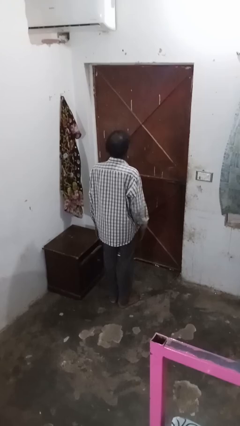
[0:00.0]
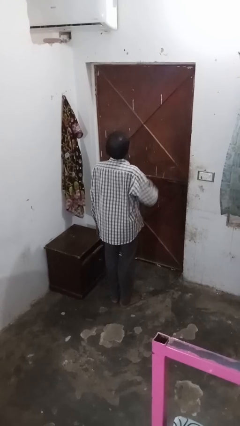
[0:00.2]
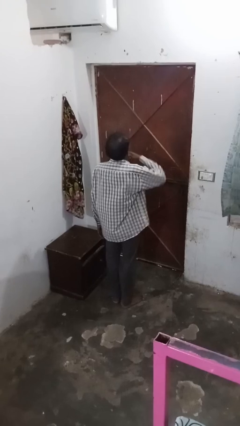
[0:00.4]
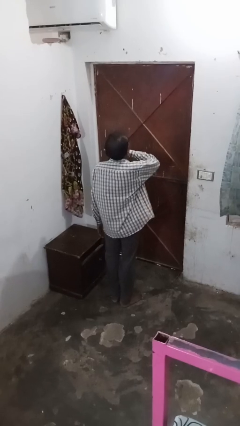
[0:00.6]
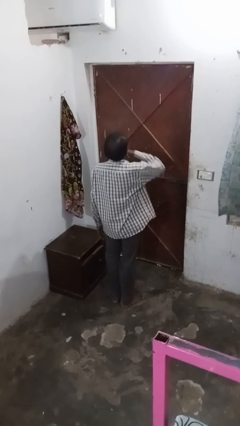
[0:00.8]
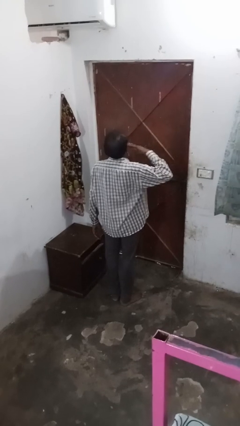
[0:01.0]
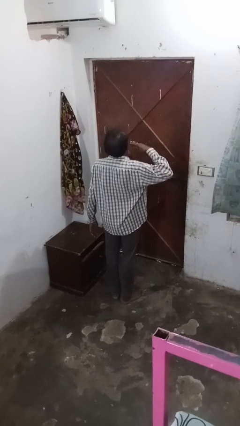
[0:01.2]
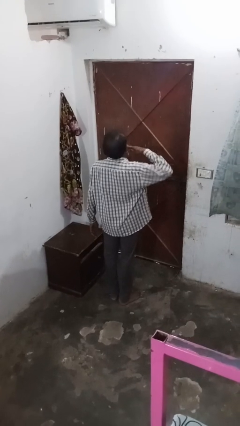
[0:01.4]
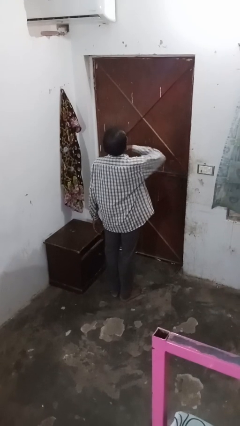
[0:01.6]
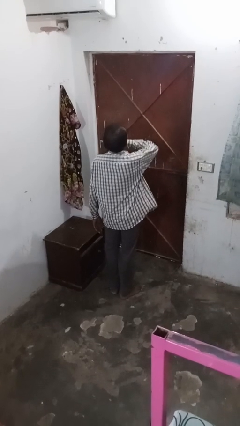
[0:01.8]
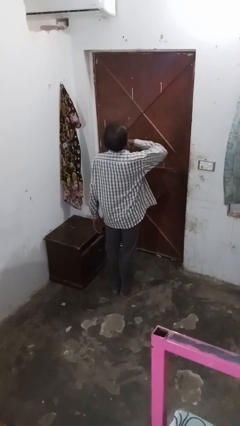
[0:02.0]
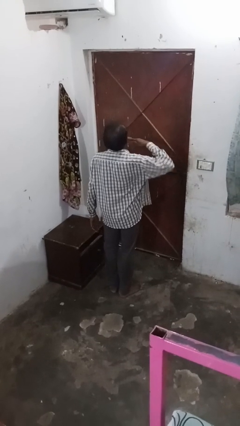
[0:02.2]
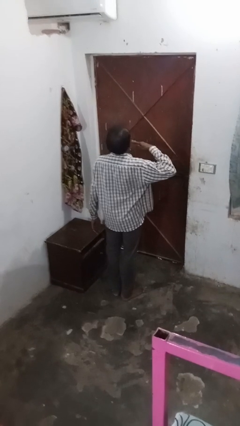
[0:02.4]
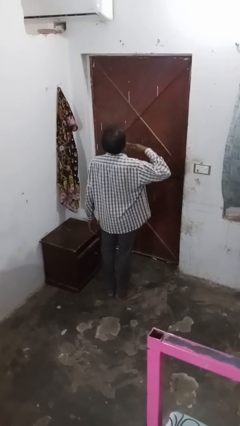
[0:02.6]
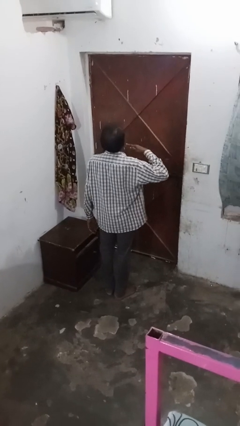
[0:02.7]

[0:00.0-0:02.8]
person gestures cut

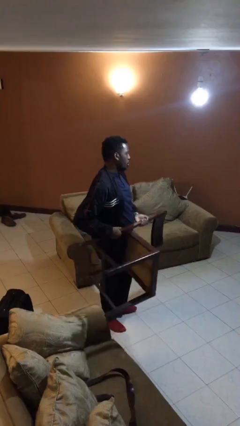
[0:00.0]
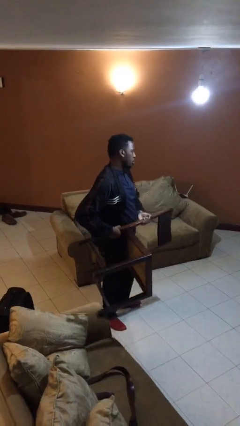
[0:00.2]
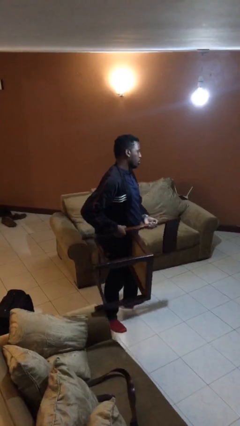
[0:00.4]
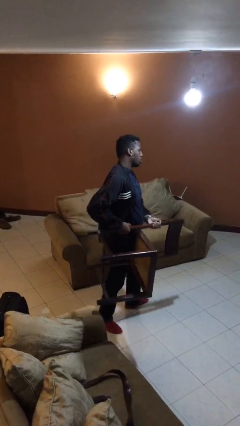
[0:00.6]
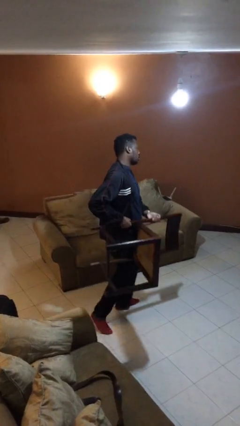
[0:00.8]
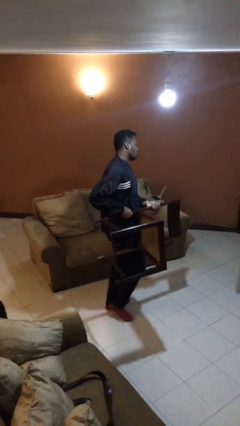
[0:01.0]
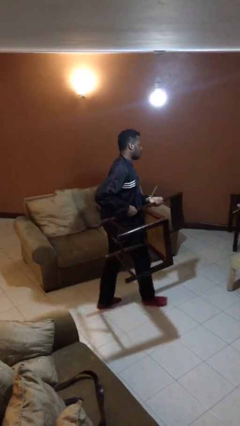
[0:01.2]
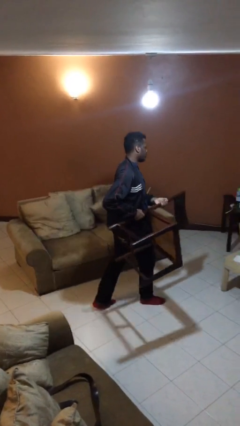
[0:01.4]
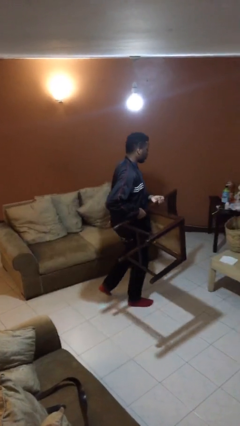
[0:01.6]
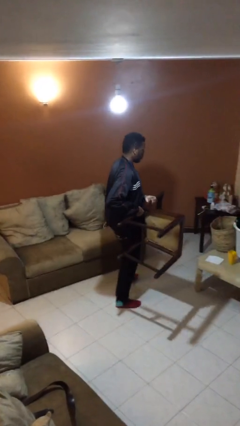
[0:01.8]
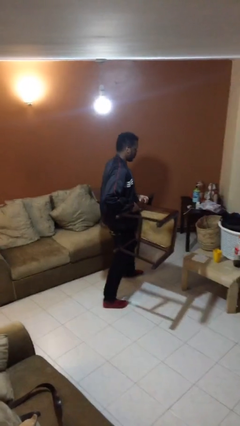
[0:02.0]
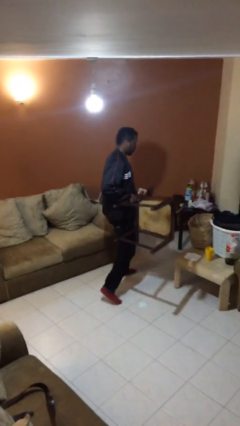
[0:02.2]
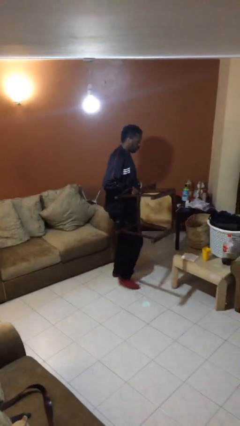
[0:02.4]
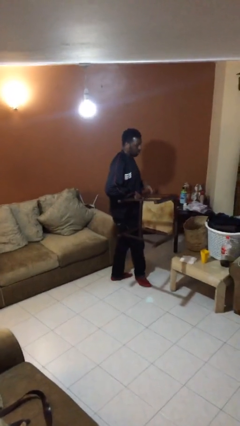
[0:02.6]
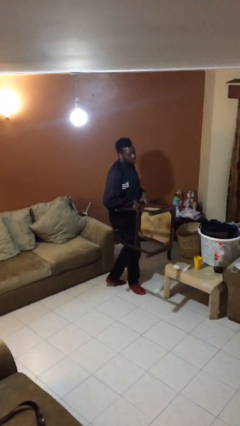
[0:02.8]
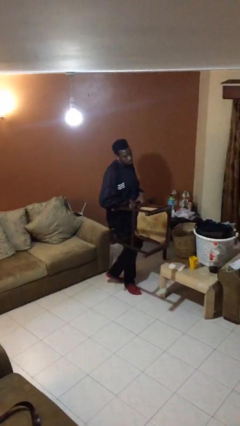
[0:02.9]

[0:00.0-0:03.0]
person carries furniture

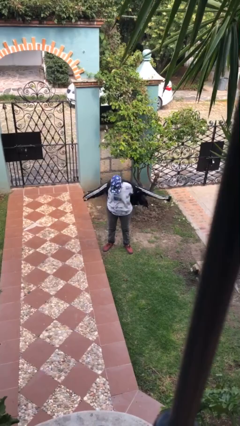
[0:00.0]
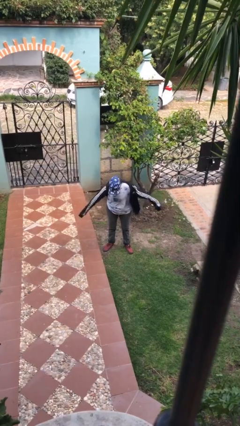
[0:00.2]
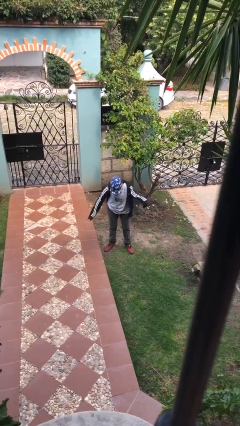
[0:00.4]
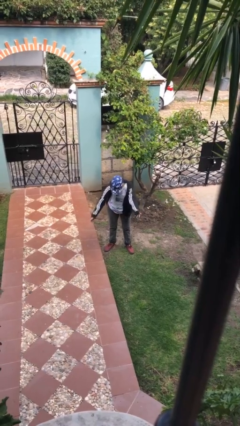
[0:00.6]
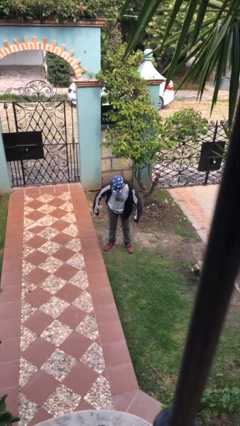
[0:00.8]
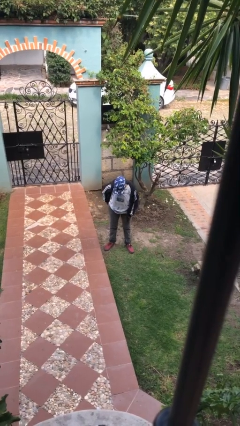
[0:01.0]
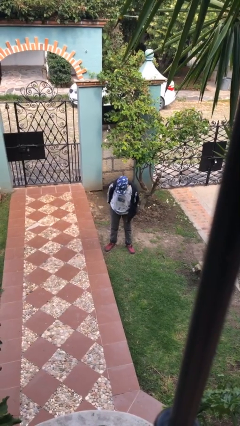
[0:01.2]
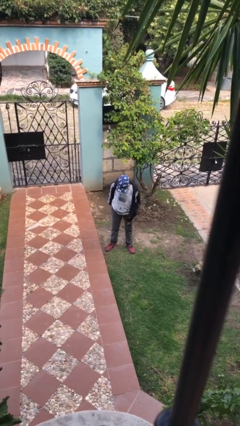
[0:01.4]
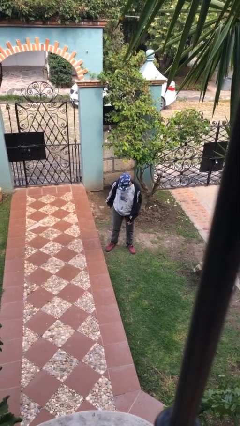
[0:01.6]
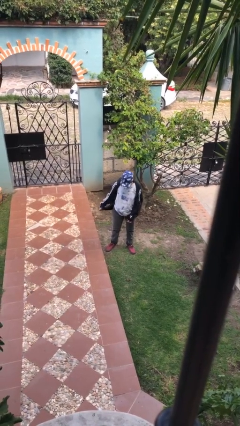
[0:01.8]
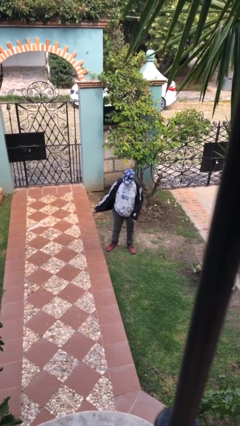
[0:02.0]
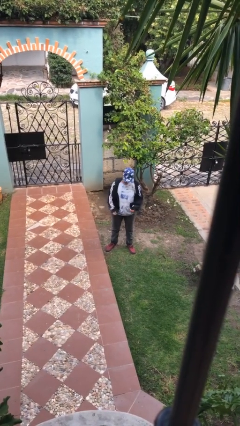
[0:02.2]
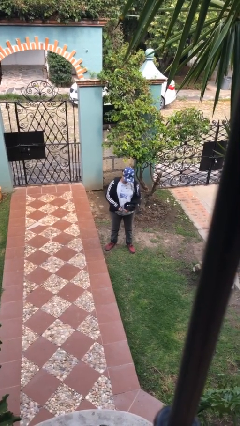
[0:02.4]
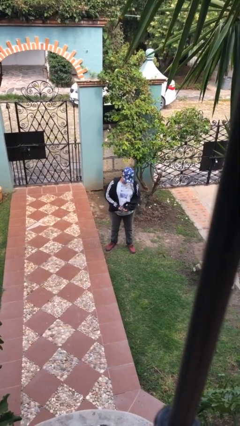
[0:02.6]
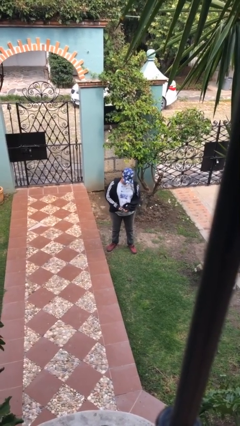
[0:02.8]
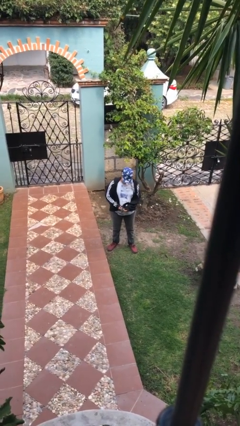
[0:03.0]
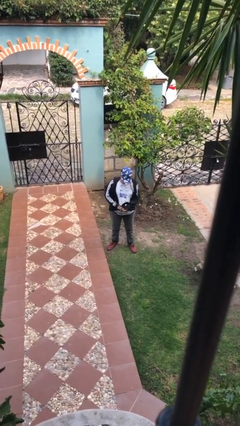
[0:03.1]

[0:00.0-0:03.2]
person zips up jacket

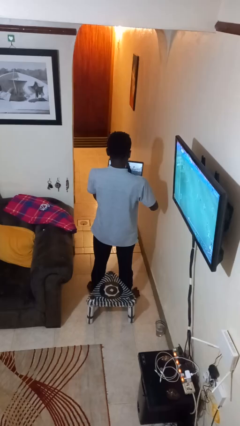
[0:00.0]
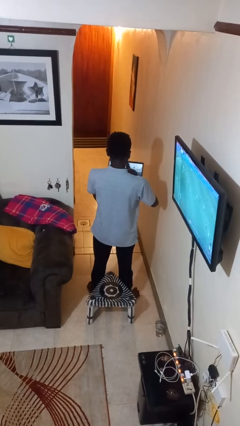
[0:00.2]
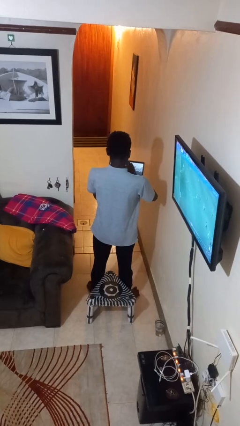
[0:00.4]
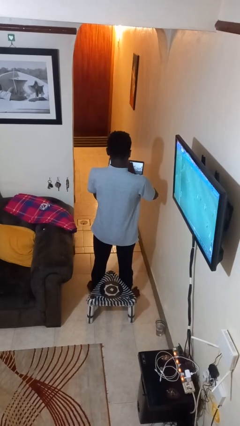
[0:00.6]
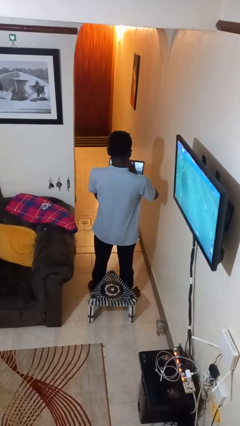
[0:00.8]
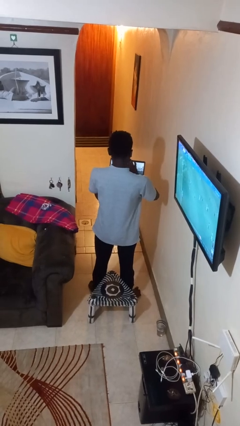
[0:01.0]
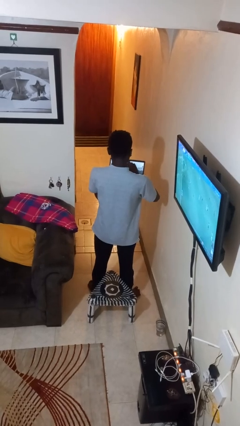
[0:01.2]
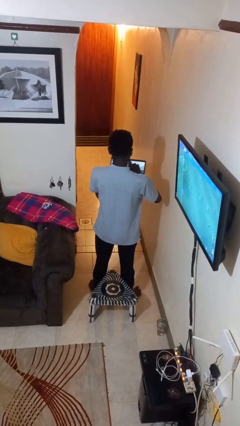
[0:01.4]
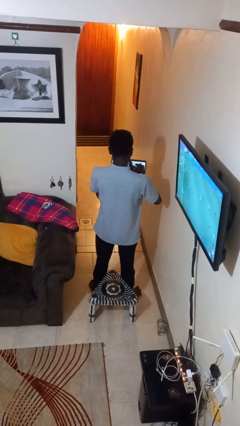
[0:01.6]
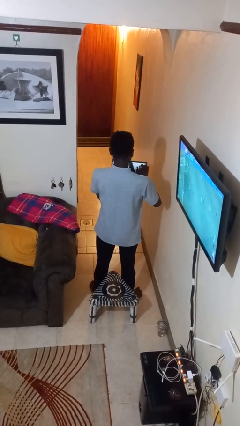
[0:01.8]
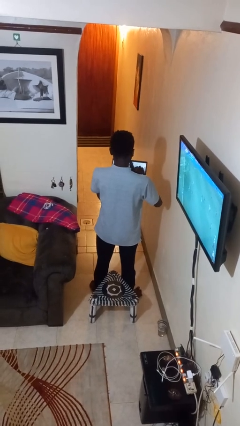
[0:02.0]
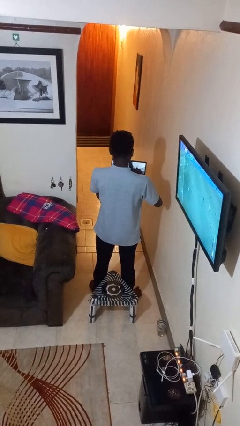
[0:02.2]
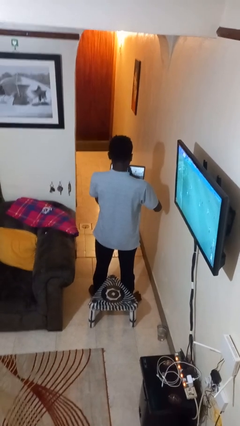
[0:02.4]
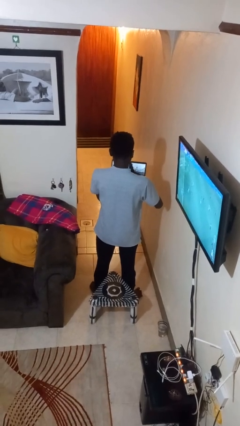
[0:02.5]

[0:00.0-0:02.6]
person interacts with tablet

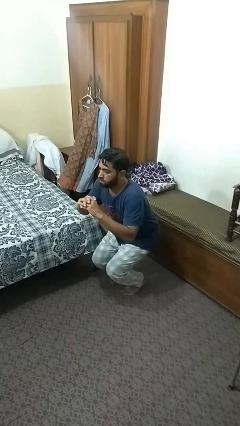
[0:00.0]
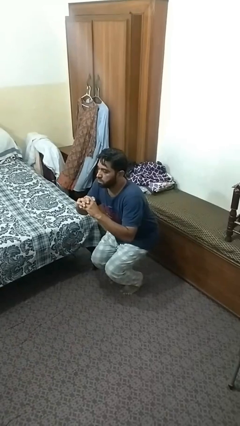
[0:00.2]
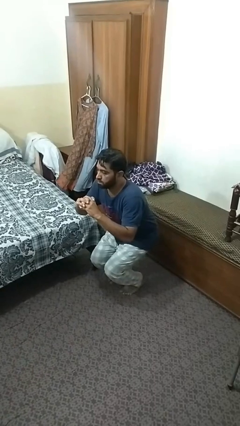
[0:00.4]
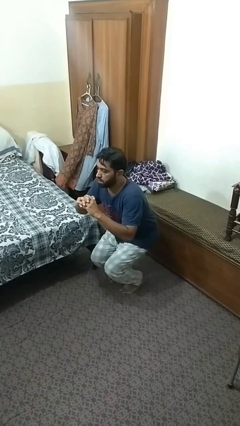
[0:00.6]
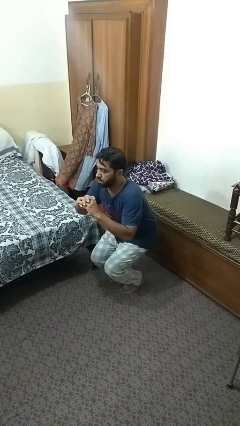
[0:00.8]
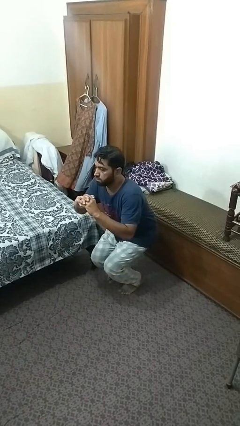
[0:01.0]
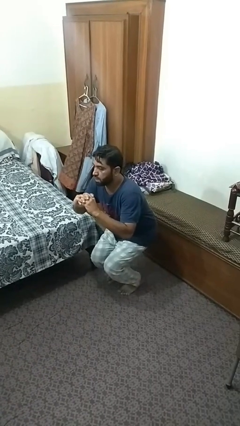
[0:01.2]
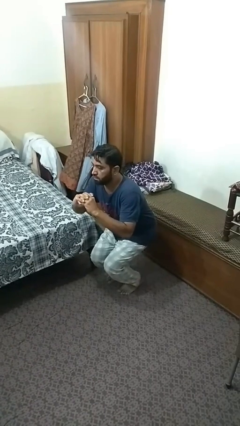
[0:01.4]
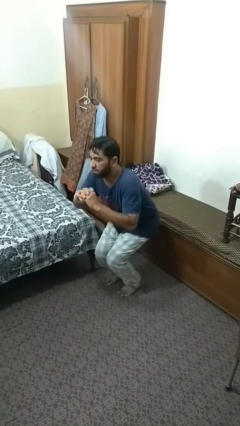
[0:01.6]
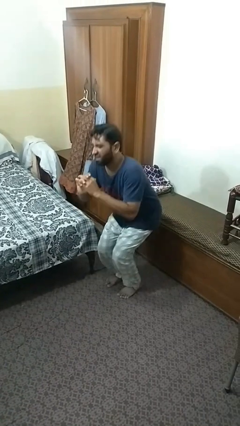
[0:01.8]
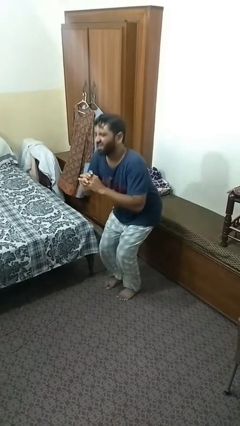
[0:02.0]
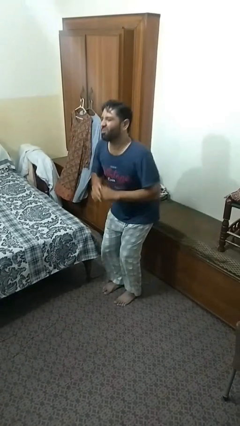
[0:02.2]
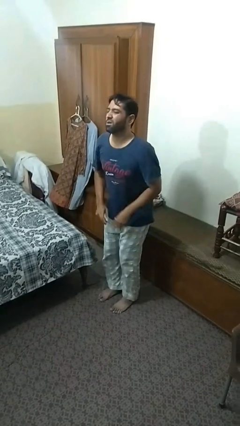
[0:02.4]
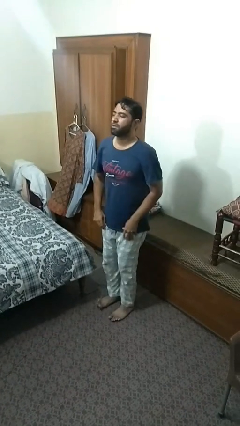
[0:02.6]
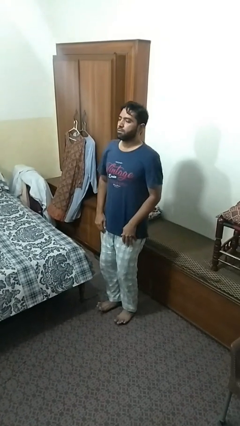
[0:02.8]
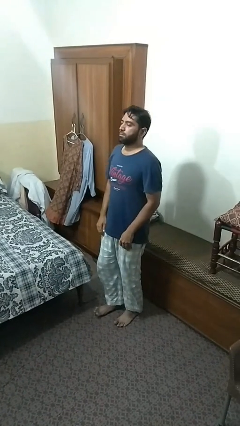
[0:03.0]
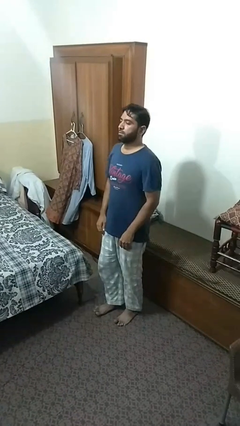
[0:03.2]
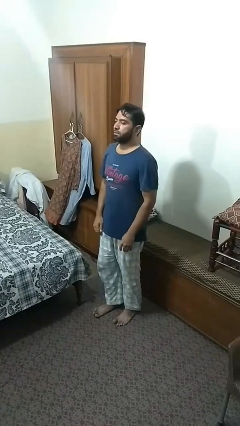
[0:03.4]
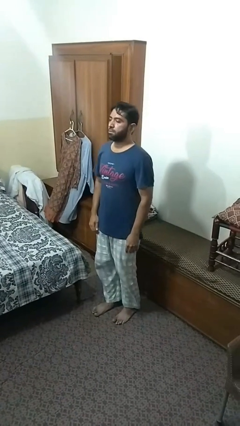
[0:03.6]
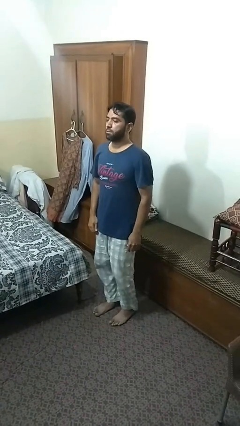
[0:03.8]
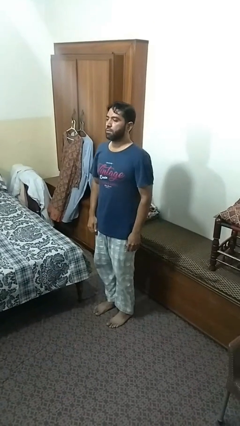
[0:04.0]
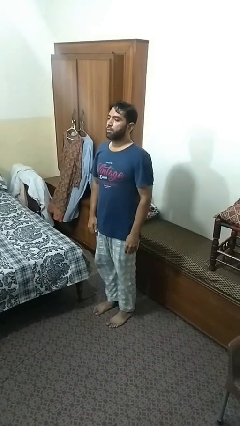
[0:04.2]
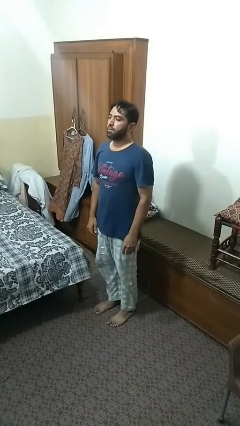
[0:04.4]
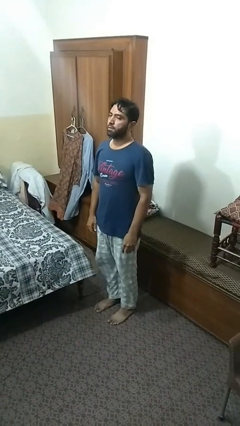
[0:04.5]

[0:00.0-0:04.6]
person stands up

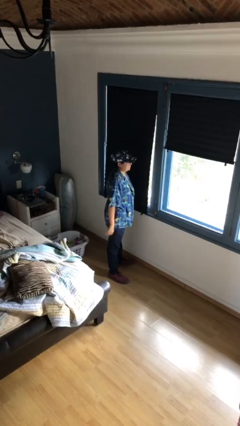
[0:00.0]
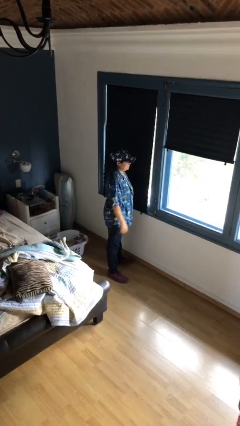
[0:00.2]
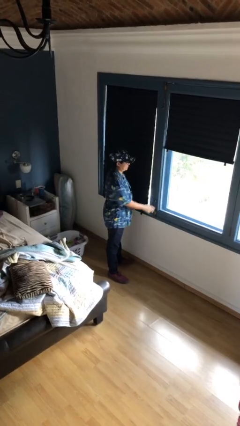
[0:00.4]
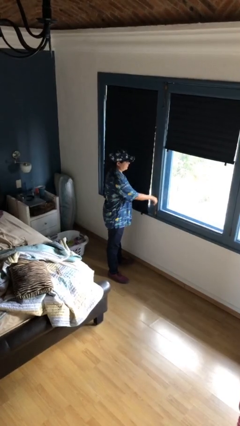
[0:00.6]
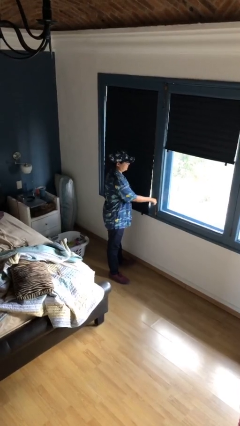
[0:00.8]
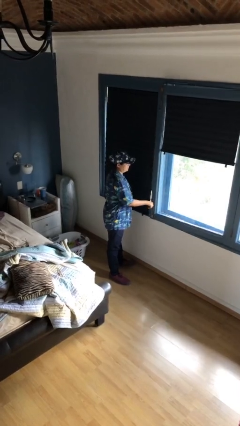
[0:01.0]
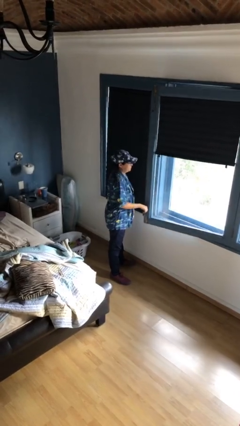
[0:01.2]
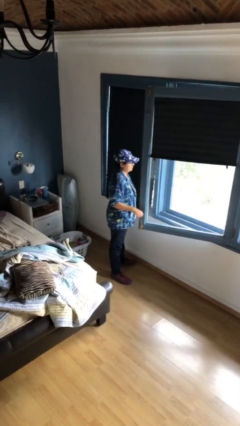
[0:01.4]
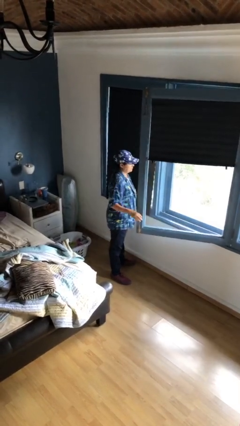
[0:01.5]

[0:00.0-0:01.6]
person opens home window
